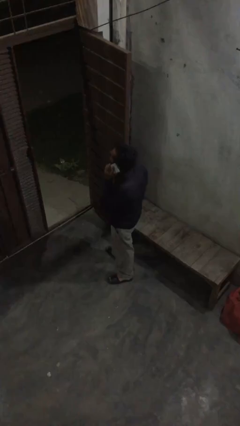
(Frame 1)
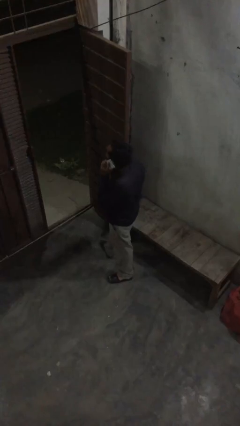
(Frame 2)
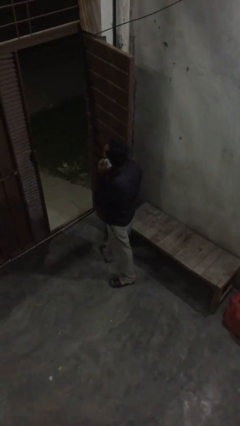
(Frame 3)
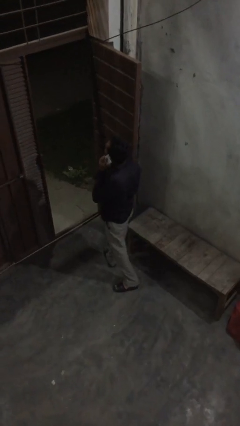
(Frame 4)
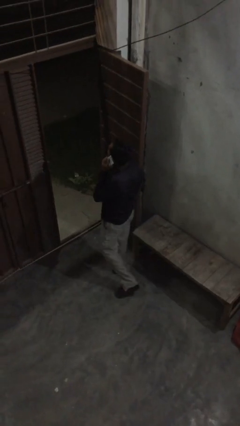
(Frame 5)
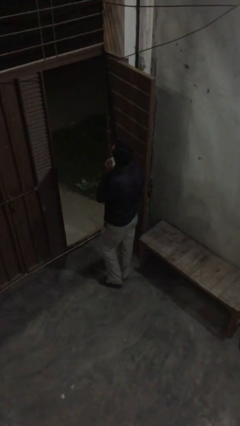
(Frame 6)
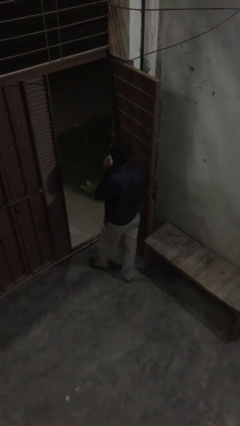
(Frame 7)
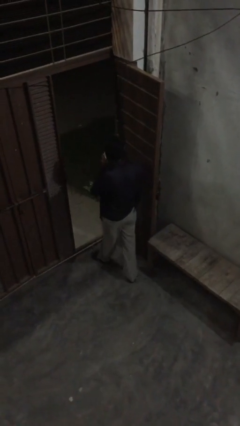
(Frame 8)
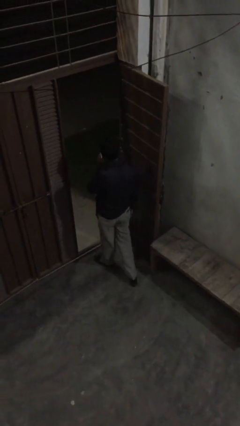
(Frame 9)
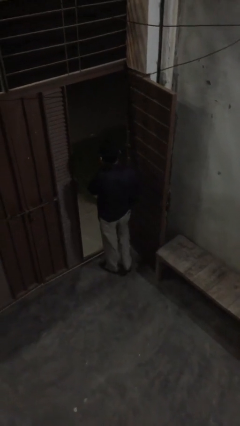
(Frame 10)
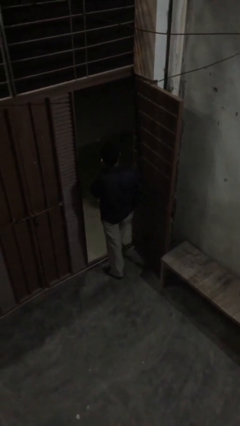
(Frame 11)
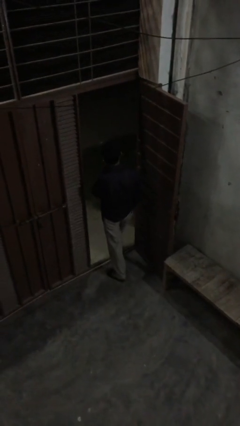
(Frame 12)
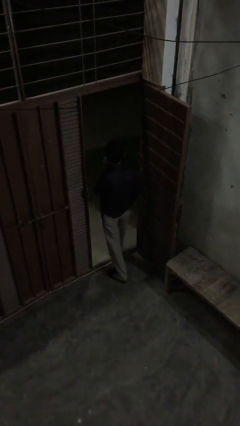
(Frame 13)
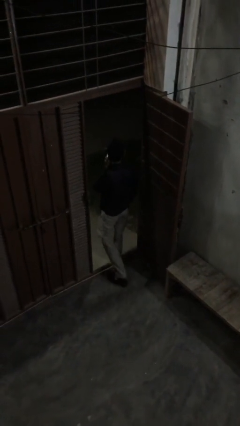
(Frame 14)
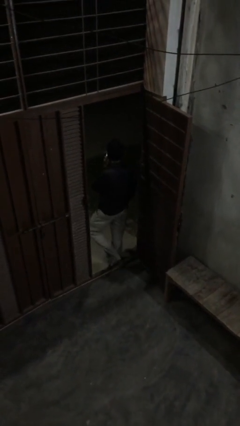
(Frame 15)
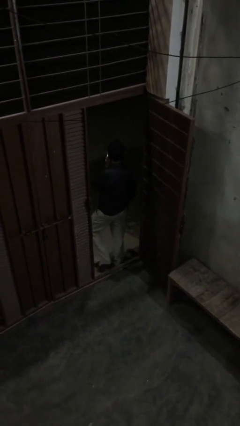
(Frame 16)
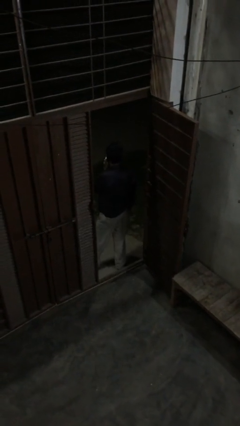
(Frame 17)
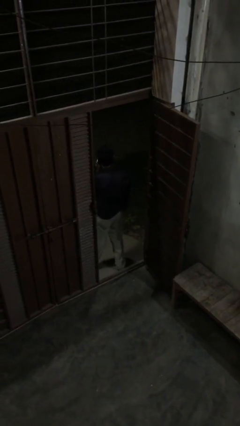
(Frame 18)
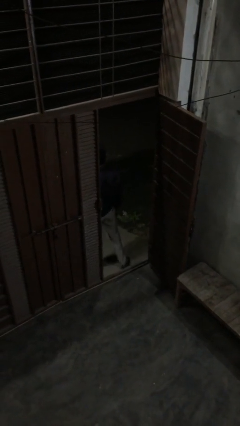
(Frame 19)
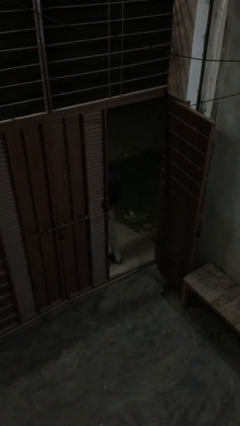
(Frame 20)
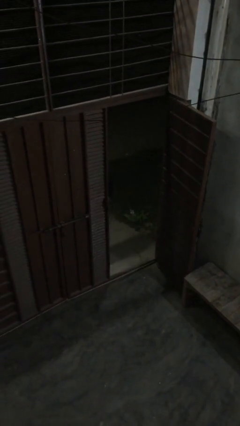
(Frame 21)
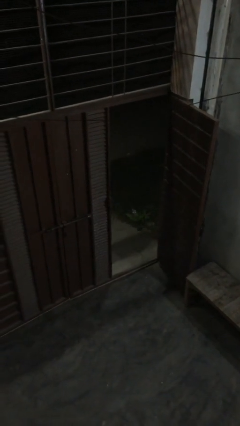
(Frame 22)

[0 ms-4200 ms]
person exits scene through structure

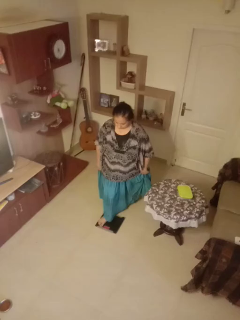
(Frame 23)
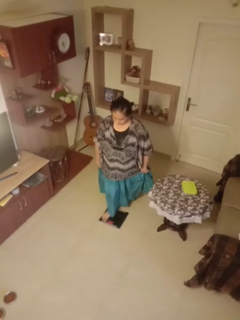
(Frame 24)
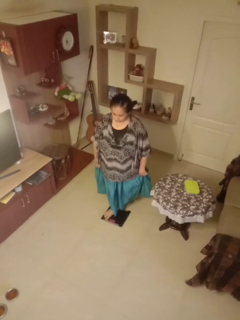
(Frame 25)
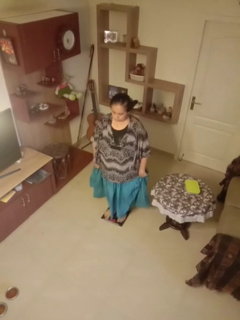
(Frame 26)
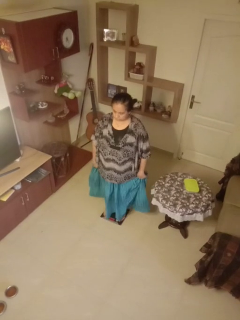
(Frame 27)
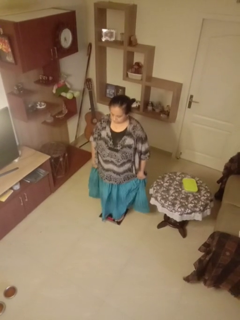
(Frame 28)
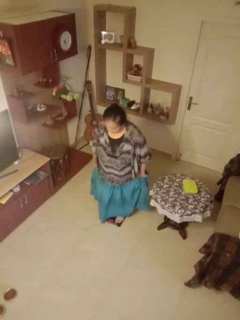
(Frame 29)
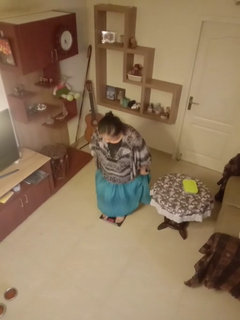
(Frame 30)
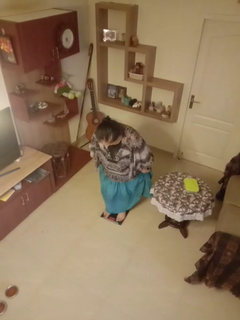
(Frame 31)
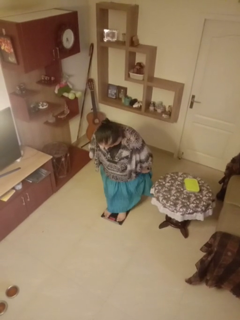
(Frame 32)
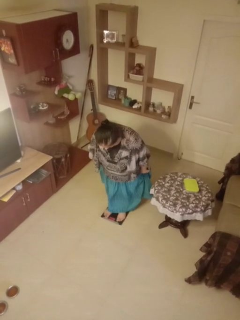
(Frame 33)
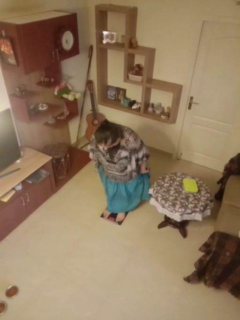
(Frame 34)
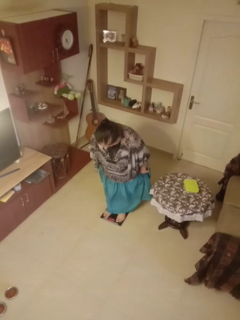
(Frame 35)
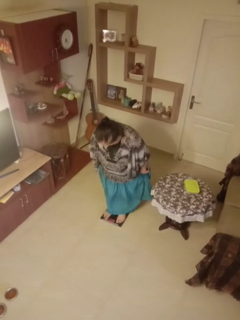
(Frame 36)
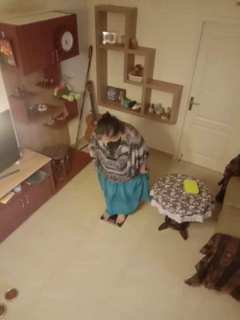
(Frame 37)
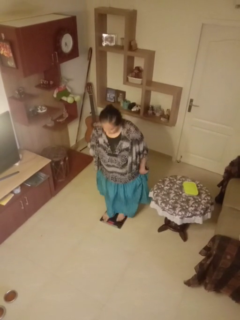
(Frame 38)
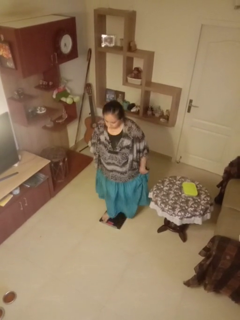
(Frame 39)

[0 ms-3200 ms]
person uses bodyweight scale

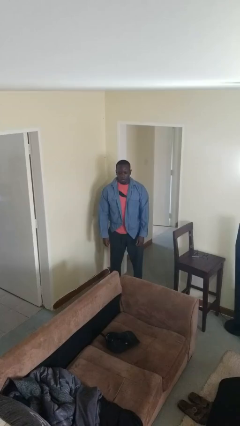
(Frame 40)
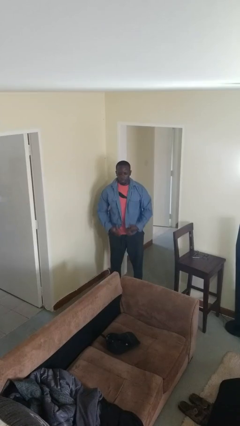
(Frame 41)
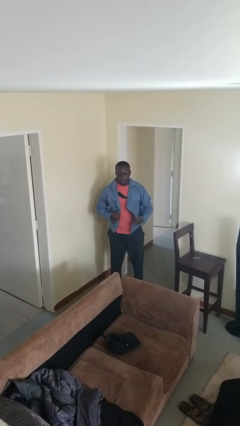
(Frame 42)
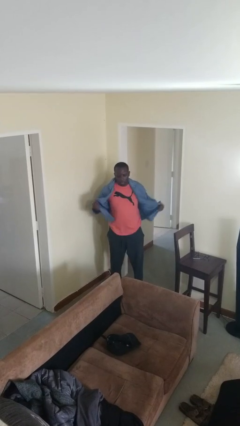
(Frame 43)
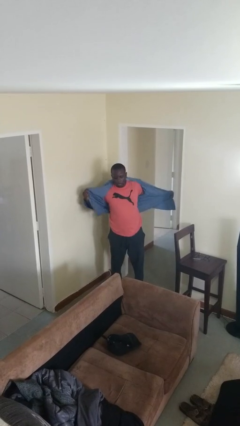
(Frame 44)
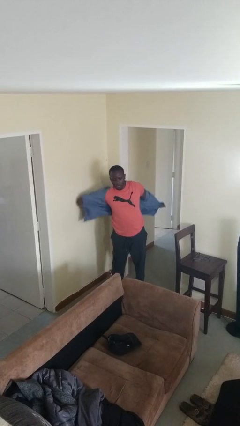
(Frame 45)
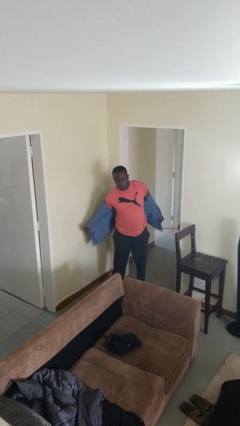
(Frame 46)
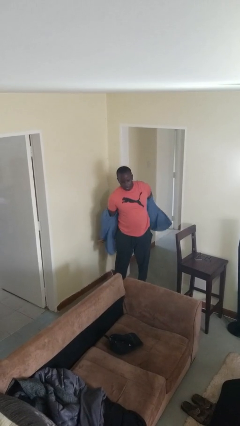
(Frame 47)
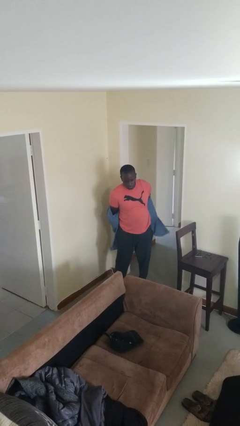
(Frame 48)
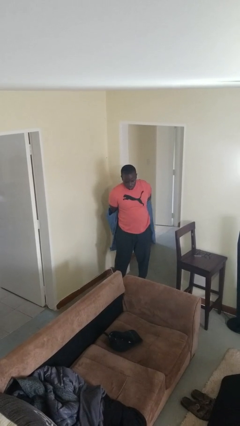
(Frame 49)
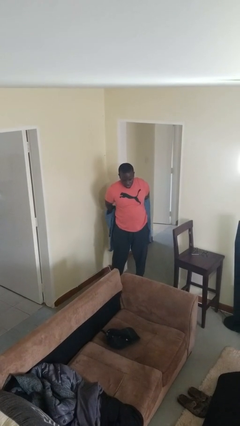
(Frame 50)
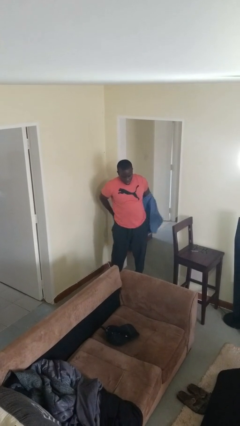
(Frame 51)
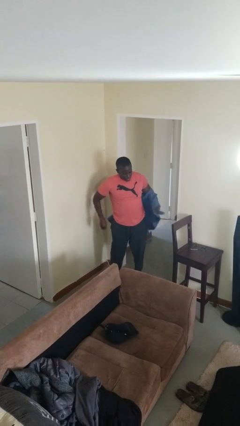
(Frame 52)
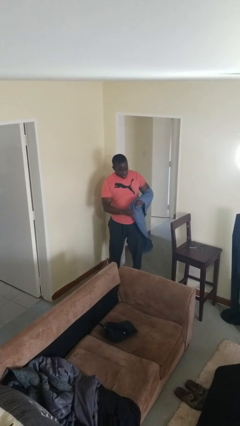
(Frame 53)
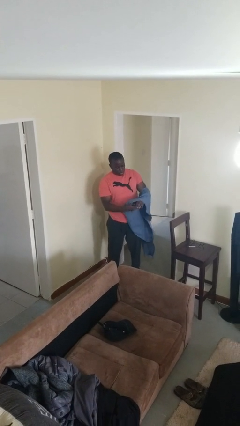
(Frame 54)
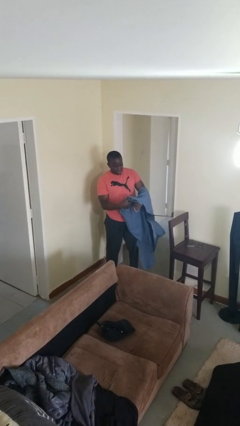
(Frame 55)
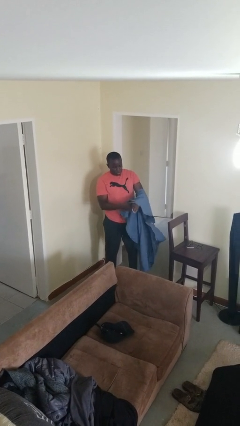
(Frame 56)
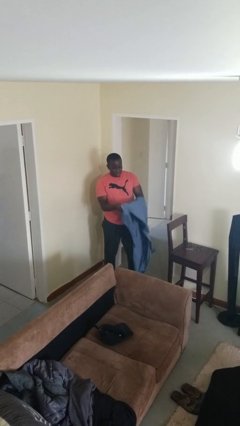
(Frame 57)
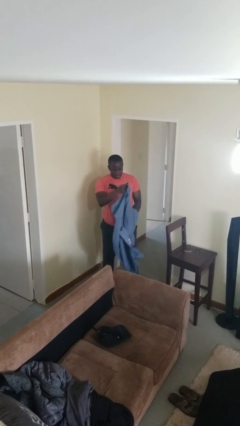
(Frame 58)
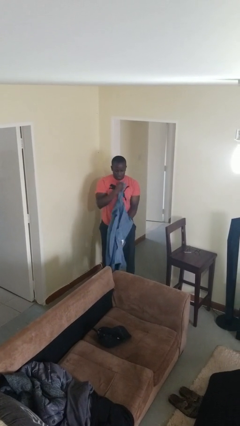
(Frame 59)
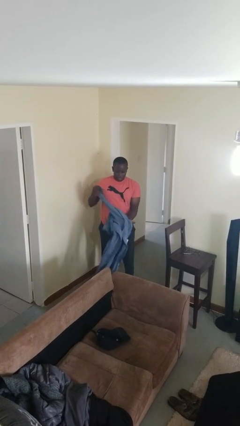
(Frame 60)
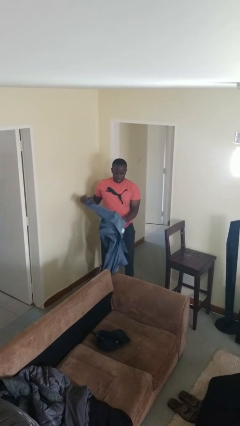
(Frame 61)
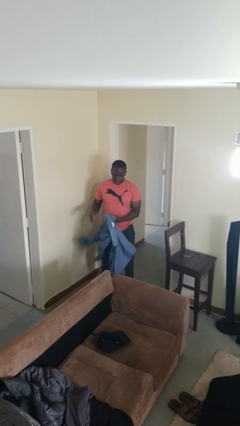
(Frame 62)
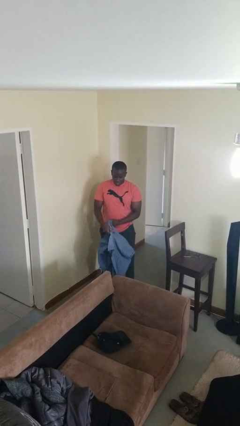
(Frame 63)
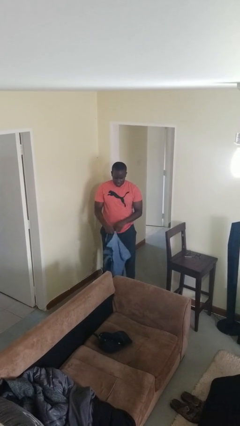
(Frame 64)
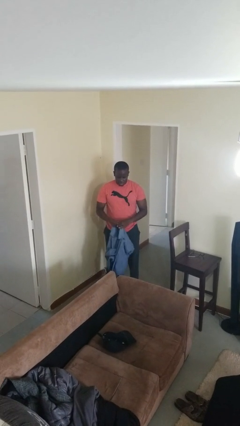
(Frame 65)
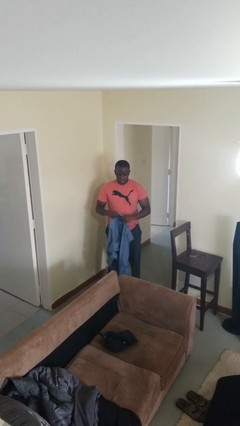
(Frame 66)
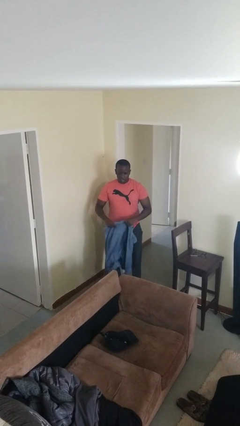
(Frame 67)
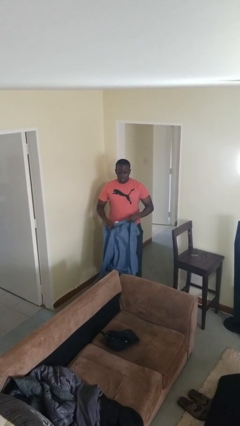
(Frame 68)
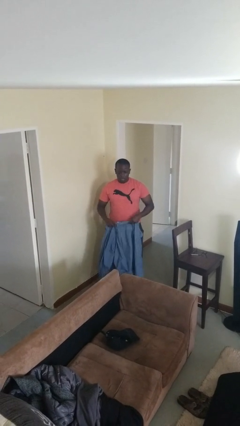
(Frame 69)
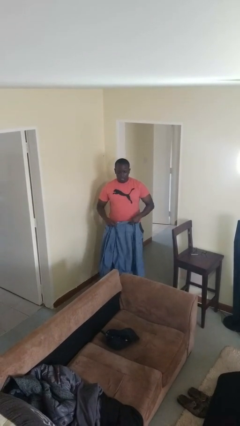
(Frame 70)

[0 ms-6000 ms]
person takes off shirt

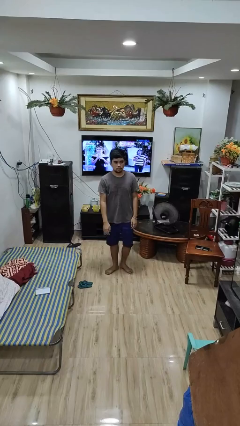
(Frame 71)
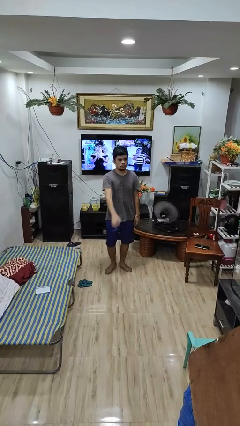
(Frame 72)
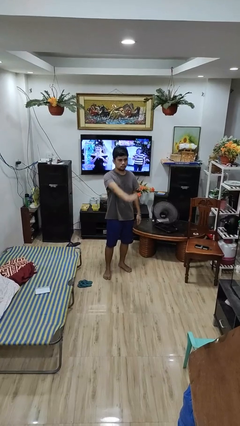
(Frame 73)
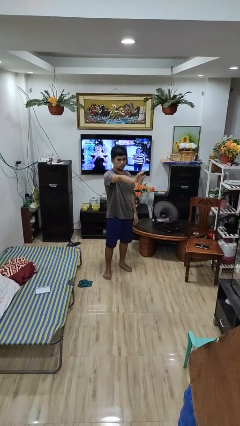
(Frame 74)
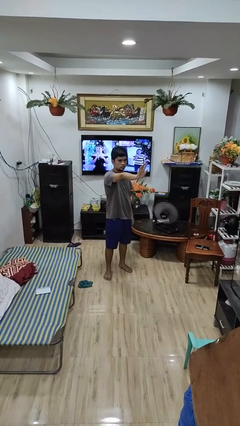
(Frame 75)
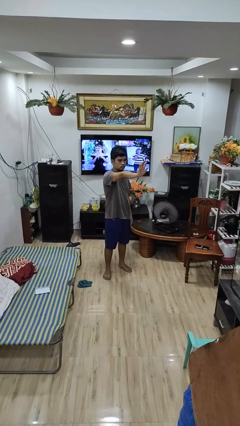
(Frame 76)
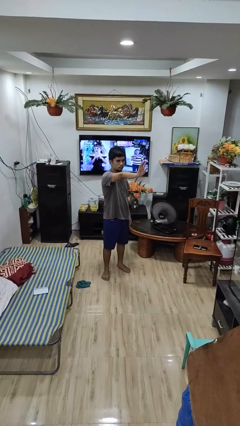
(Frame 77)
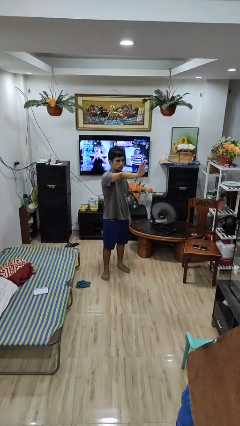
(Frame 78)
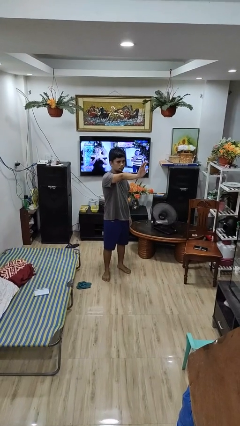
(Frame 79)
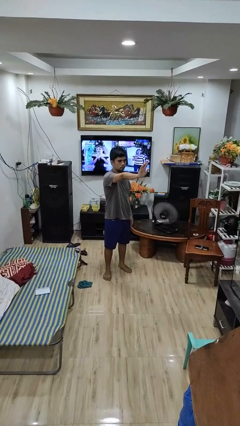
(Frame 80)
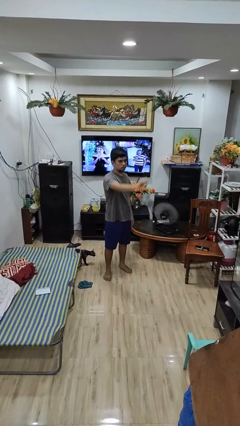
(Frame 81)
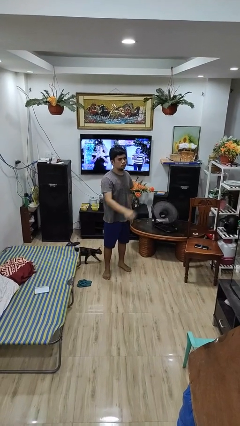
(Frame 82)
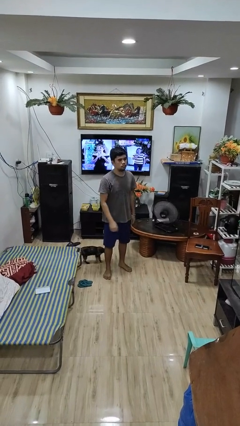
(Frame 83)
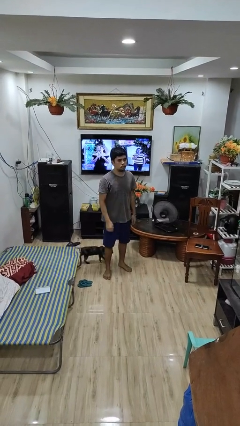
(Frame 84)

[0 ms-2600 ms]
person gestures stop

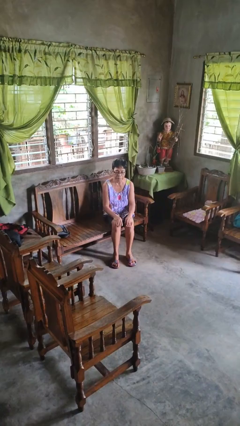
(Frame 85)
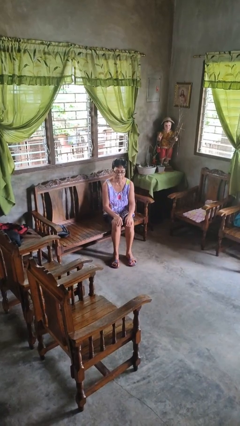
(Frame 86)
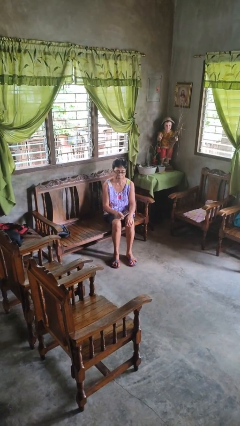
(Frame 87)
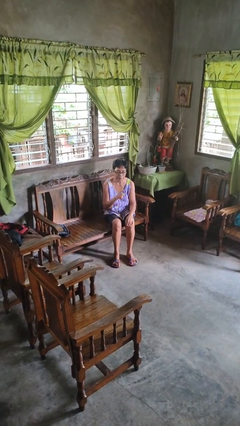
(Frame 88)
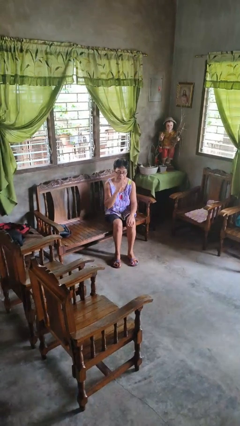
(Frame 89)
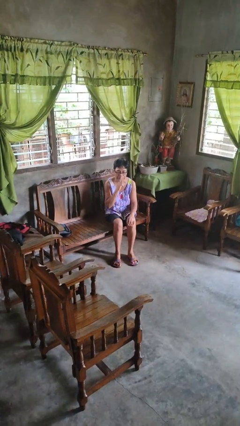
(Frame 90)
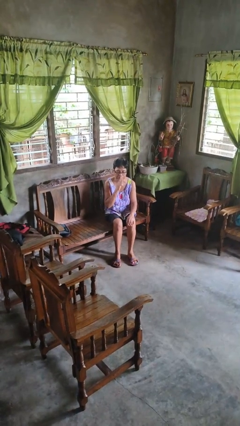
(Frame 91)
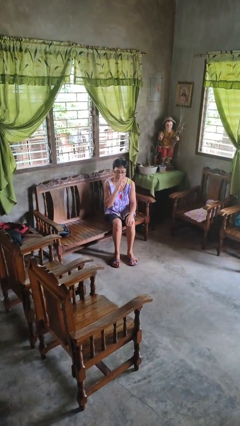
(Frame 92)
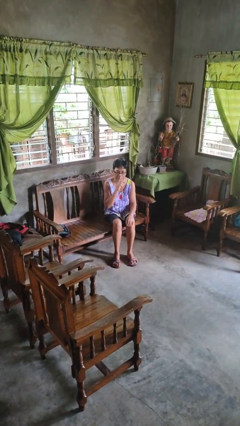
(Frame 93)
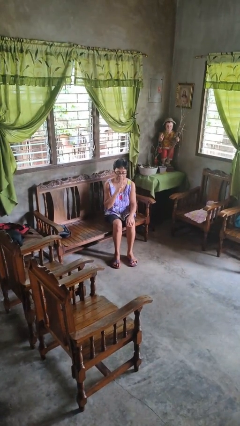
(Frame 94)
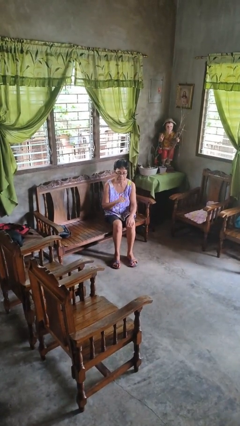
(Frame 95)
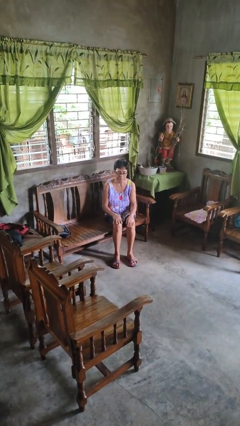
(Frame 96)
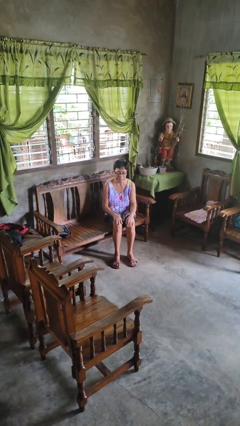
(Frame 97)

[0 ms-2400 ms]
person gestures be quiet
